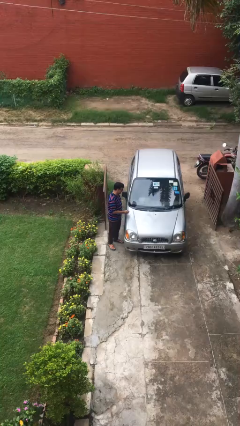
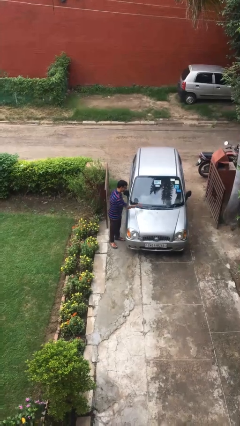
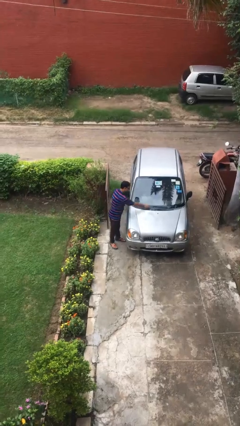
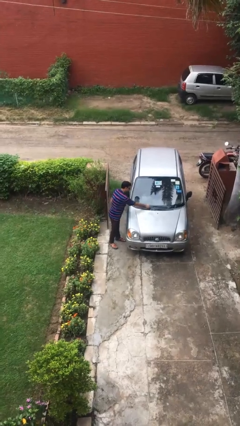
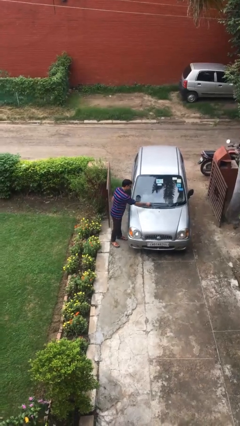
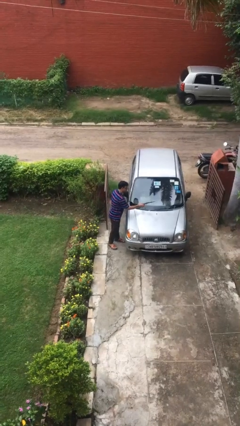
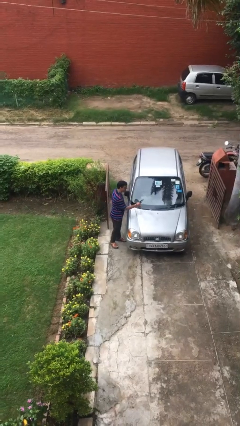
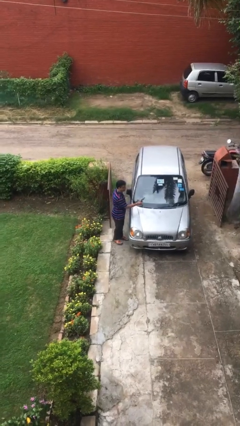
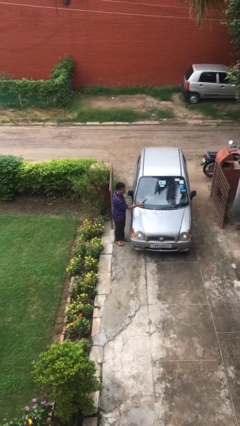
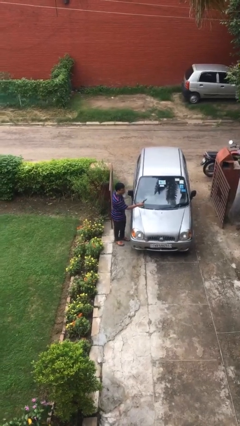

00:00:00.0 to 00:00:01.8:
person flips up car wipers

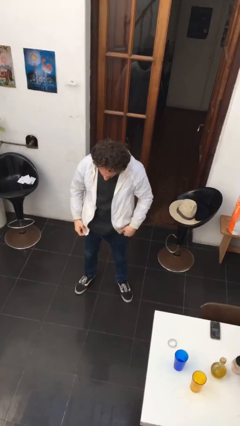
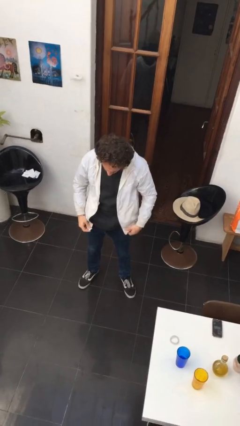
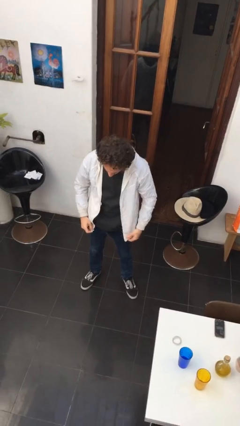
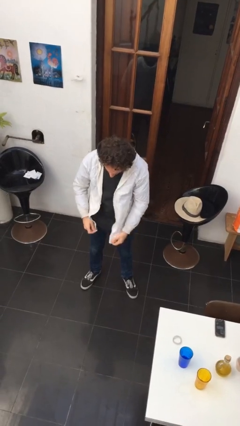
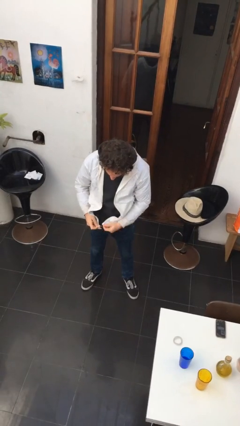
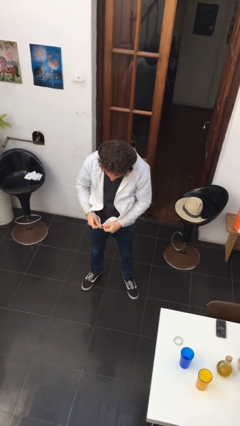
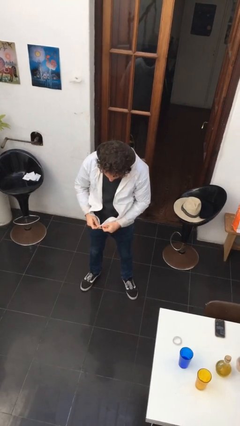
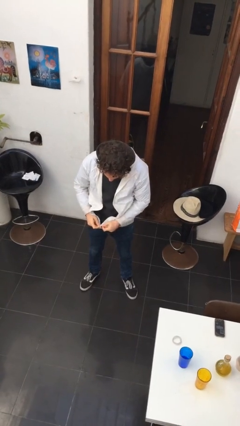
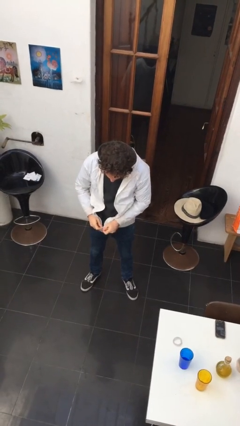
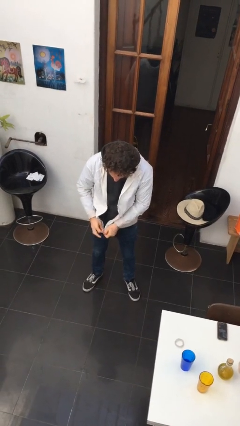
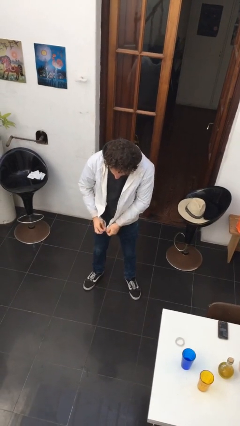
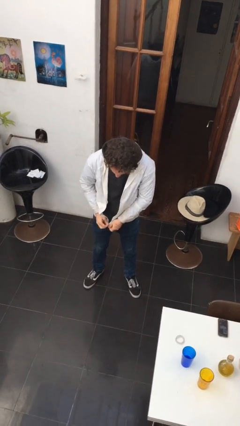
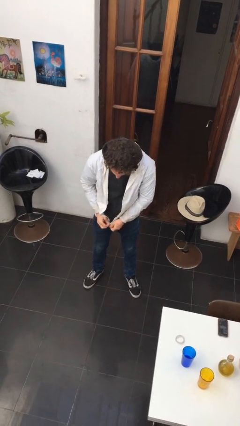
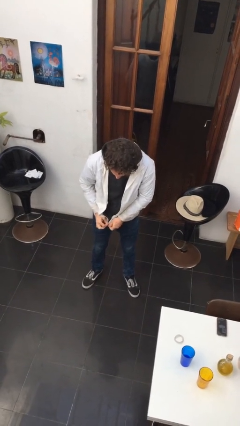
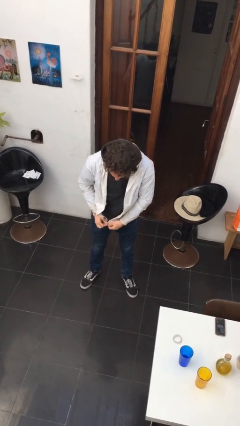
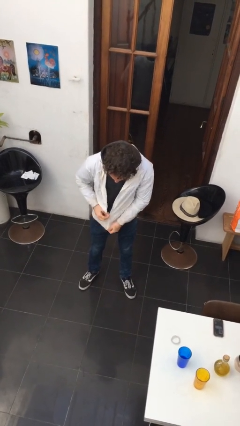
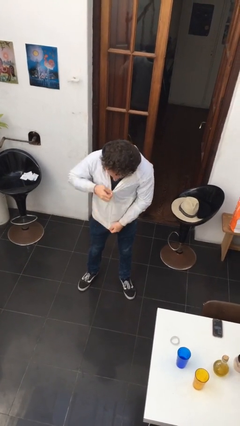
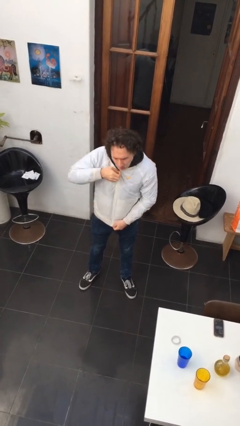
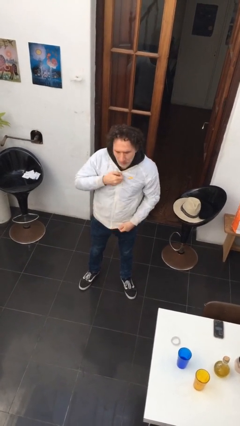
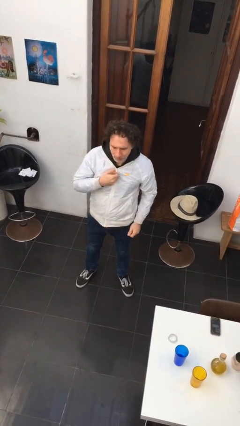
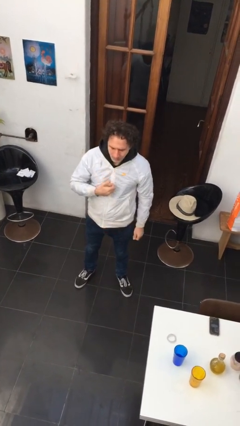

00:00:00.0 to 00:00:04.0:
person zips up jacket

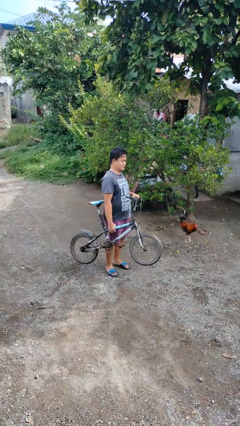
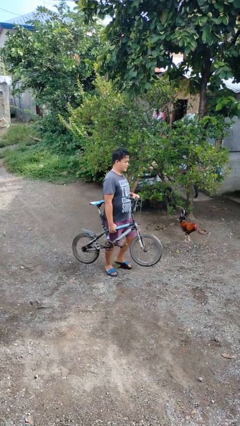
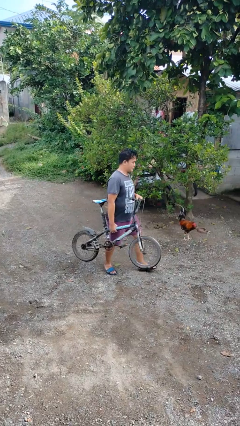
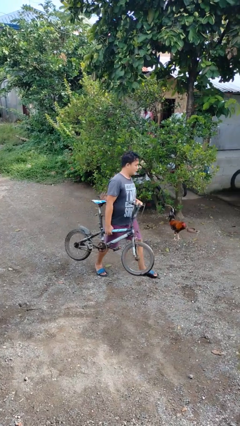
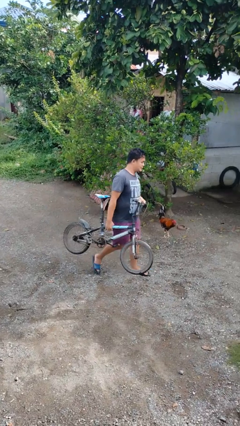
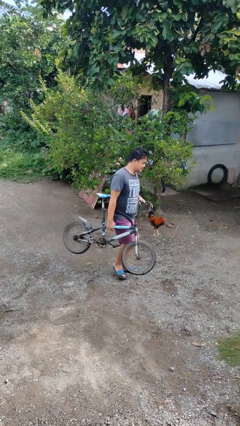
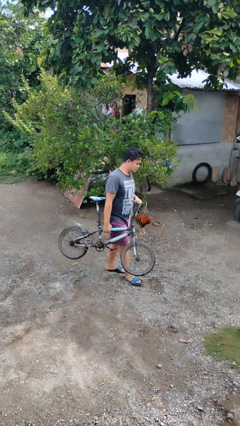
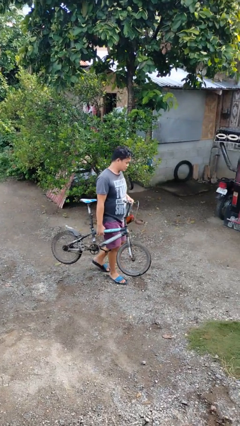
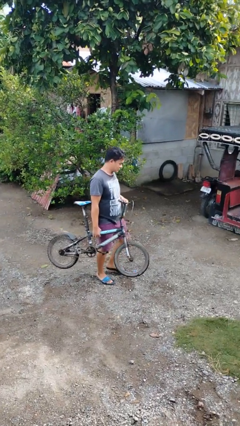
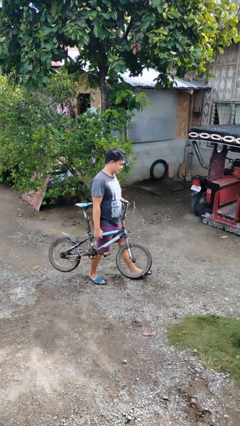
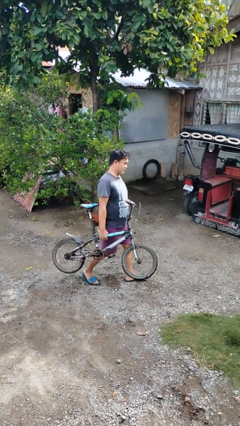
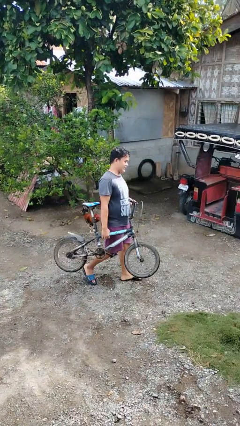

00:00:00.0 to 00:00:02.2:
person carries bicycle

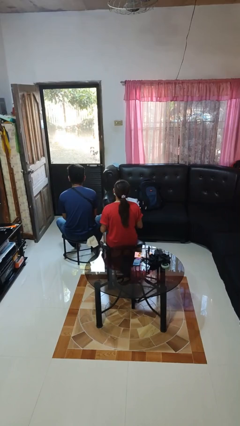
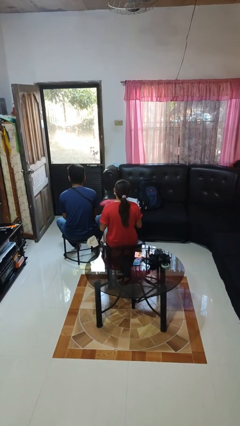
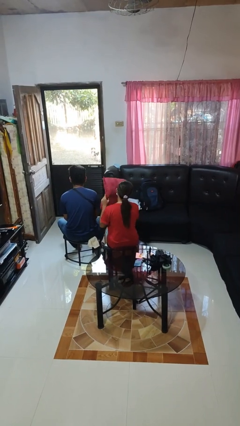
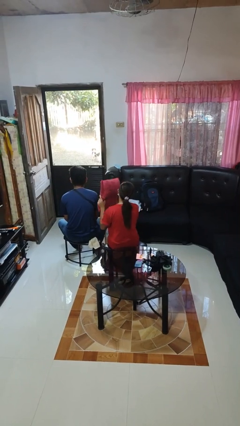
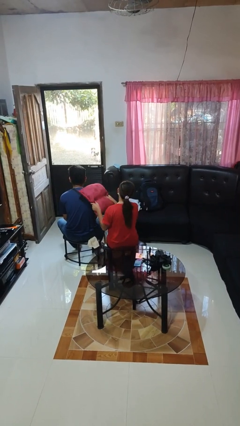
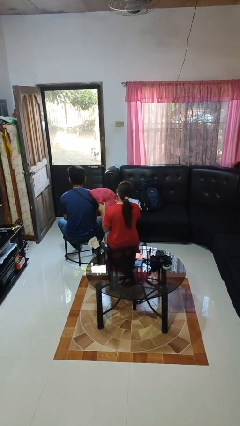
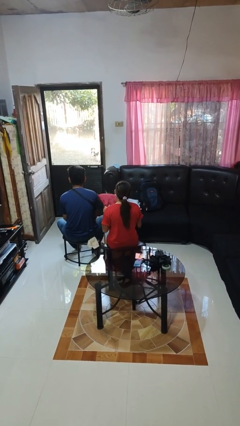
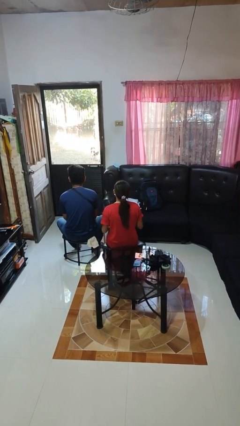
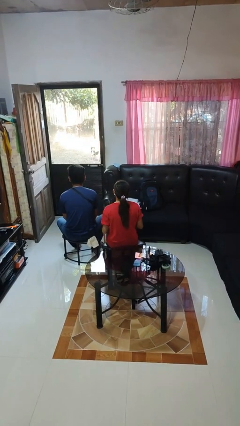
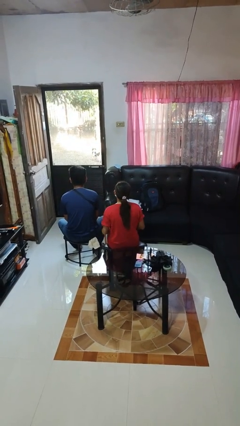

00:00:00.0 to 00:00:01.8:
person hits person with pillow

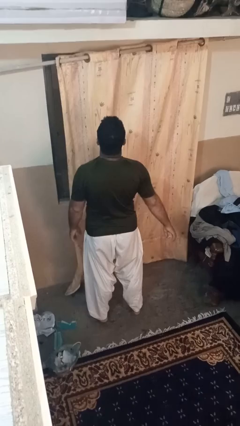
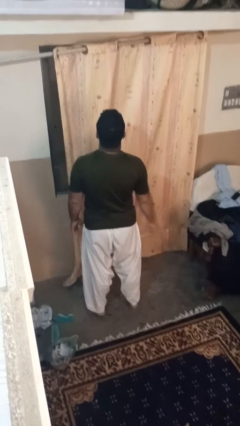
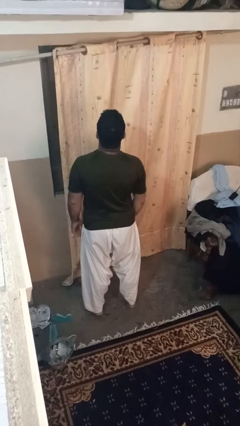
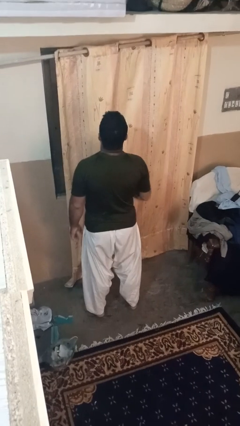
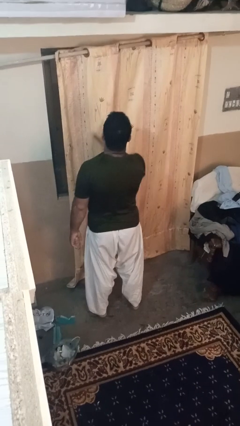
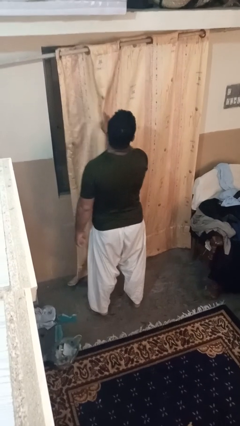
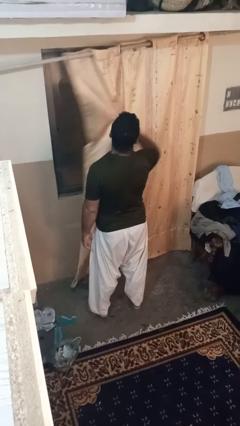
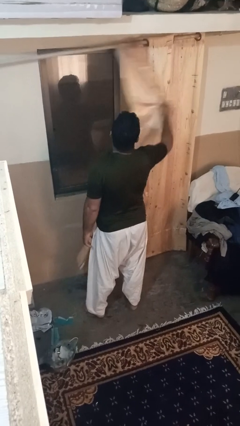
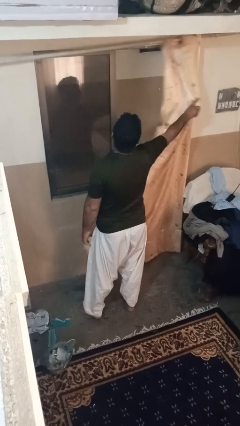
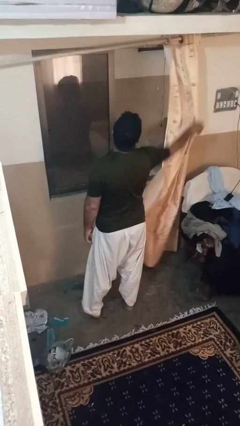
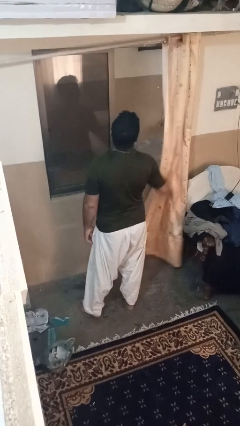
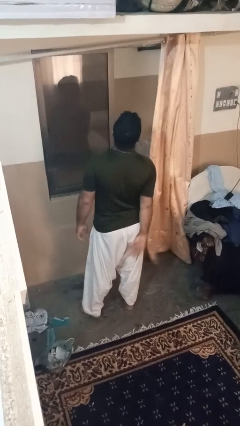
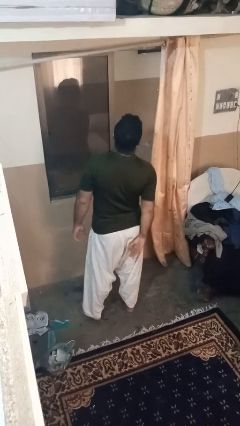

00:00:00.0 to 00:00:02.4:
person opens curtains

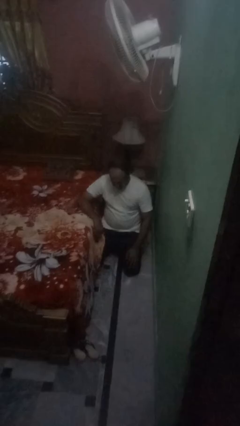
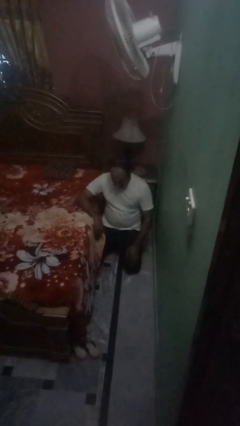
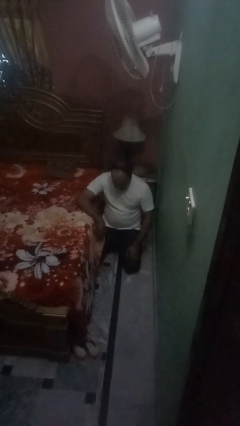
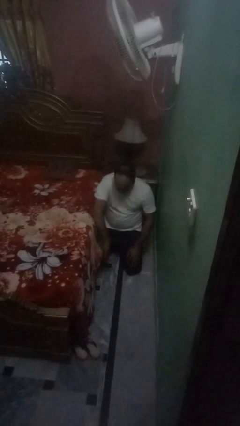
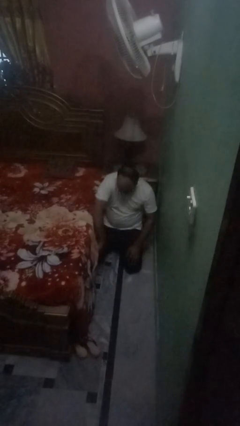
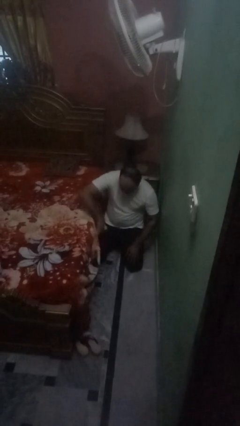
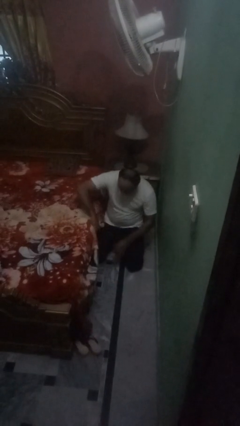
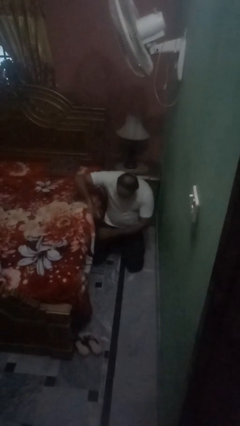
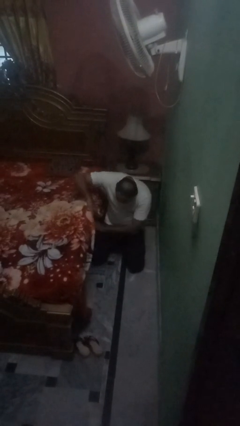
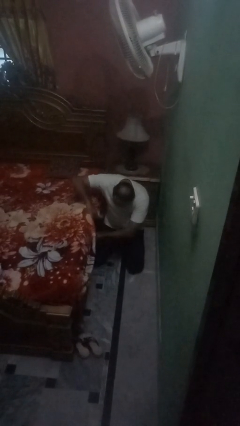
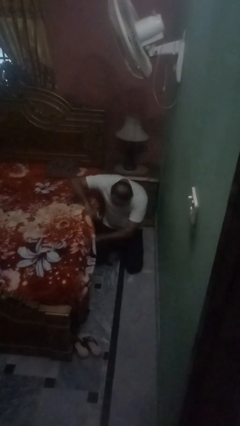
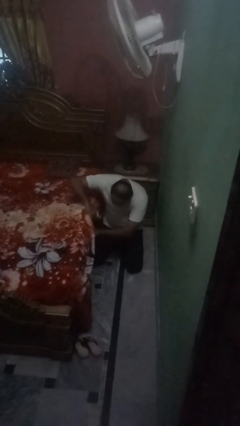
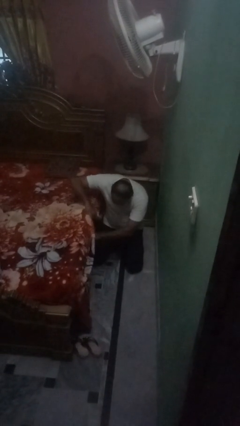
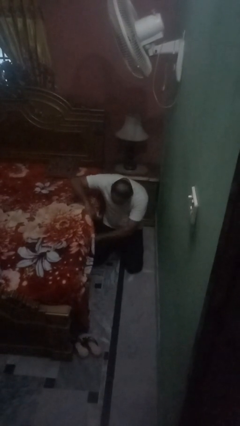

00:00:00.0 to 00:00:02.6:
person searches under bed

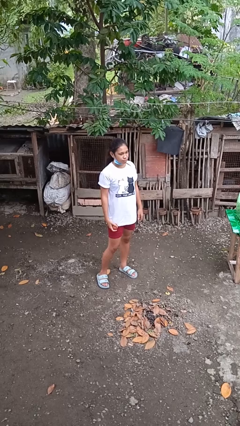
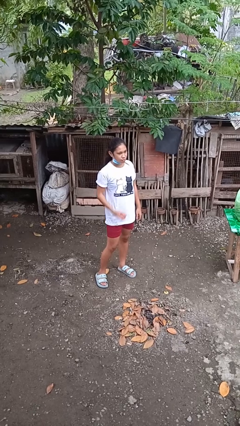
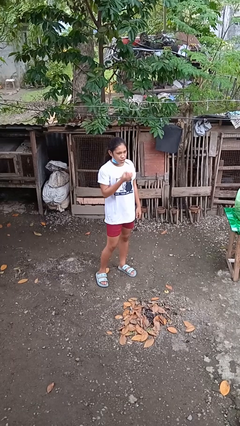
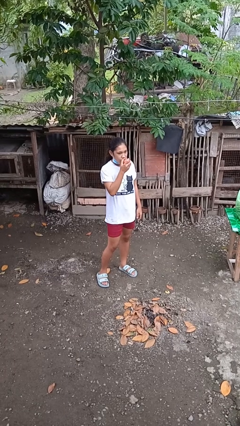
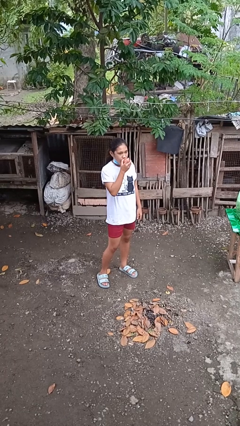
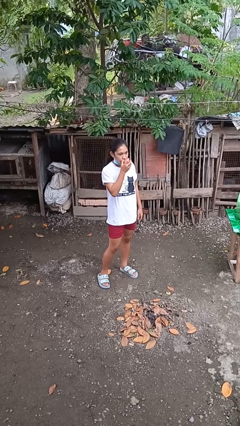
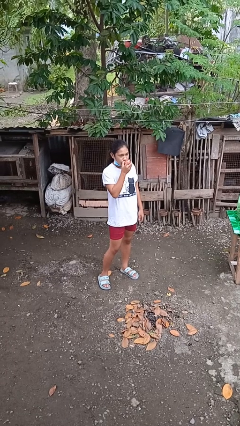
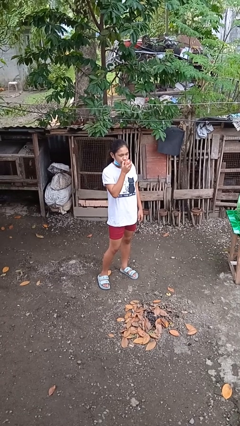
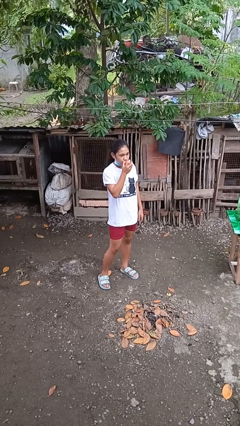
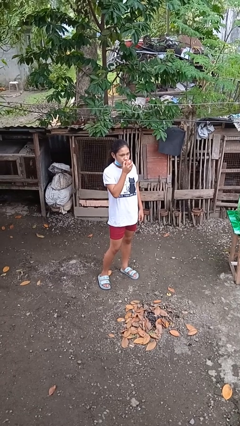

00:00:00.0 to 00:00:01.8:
person eats apple

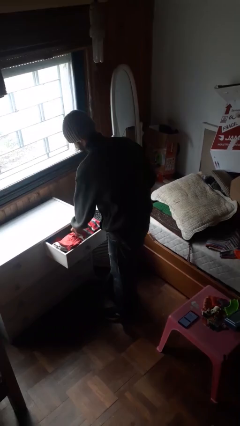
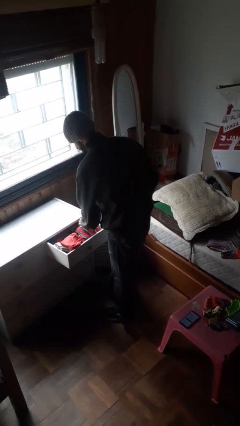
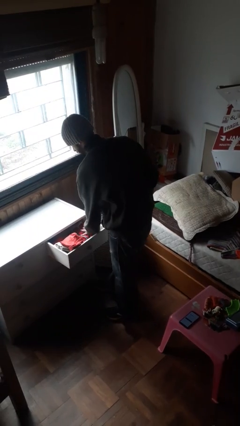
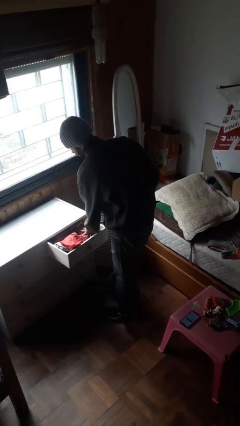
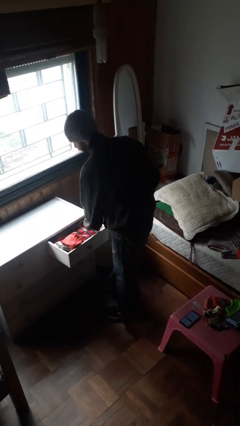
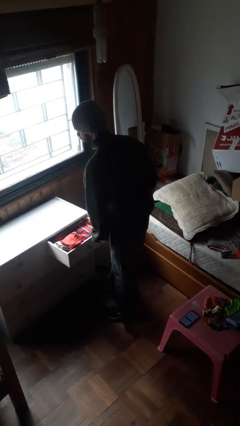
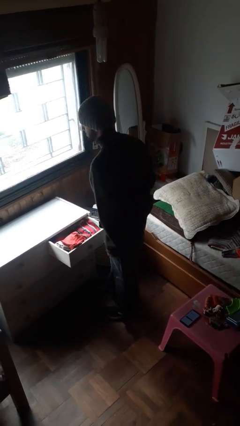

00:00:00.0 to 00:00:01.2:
person puts clothes into dresser
